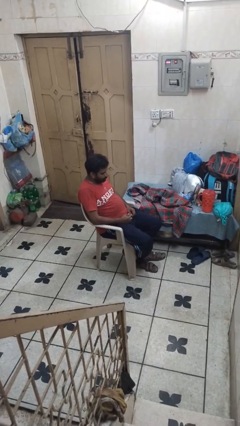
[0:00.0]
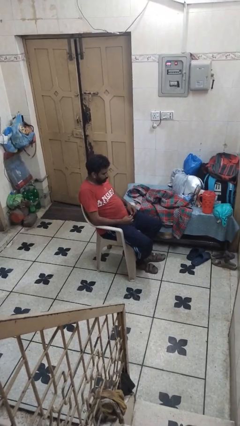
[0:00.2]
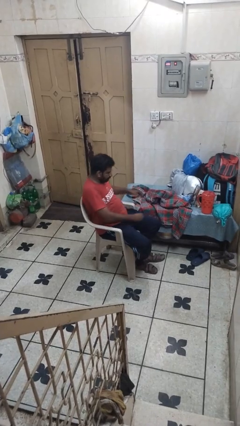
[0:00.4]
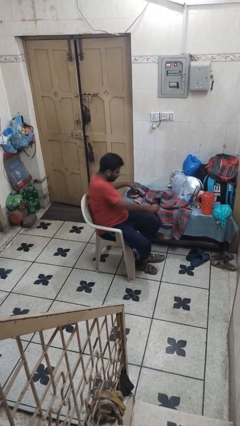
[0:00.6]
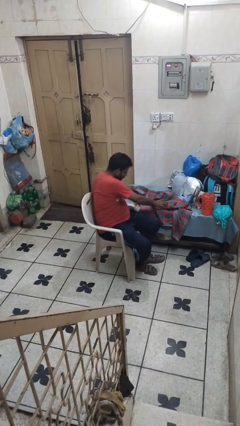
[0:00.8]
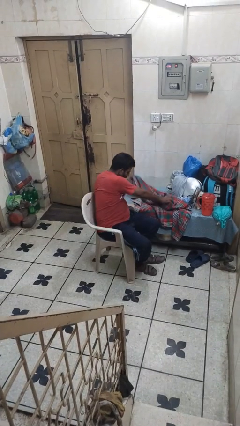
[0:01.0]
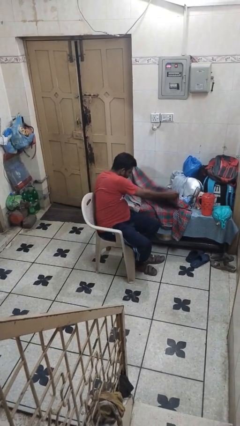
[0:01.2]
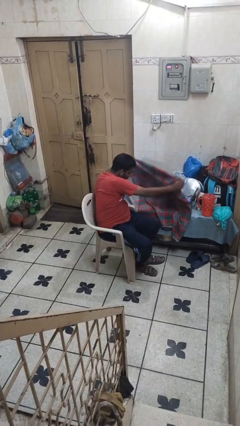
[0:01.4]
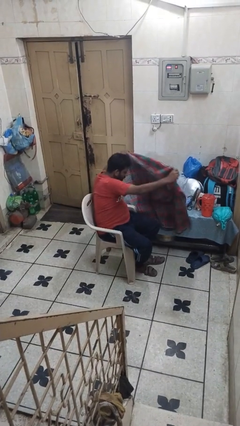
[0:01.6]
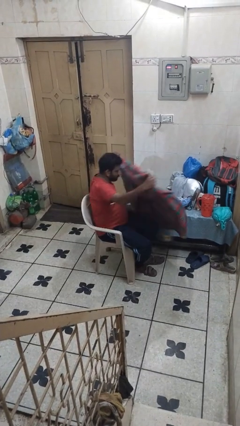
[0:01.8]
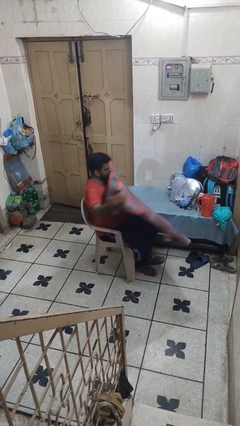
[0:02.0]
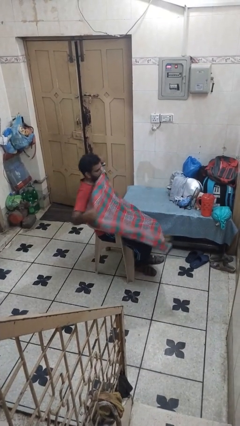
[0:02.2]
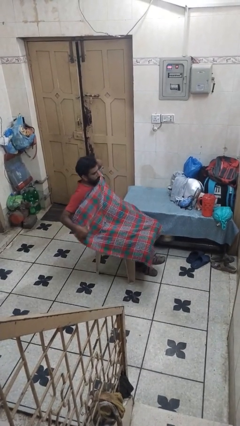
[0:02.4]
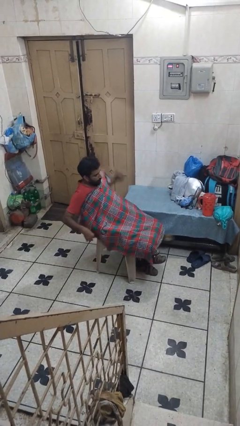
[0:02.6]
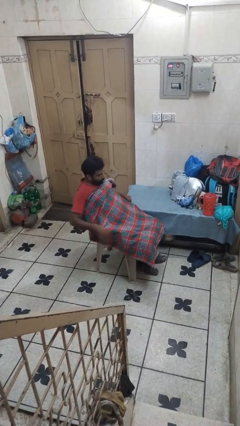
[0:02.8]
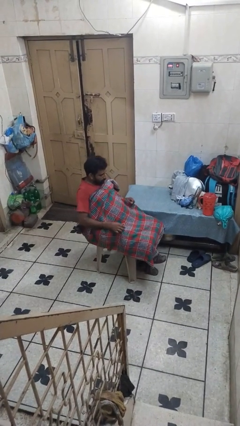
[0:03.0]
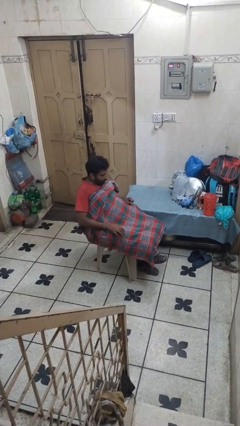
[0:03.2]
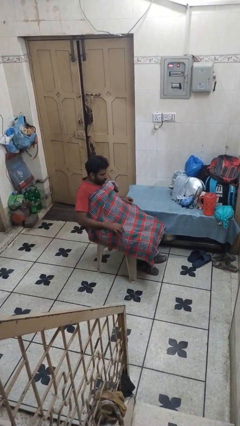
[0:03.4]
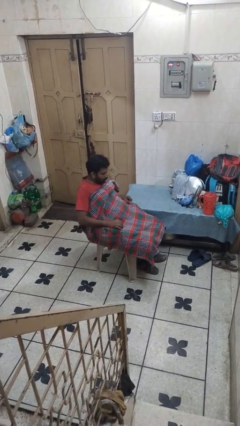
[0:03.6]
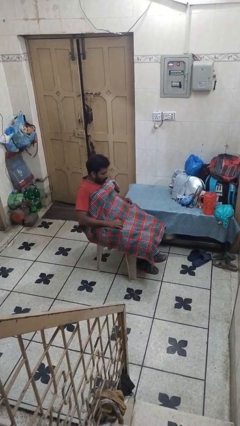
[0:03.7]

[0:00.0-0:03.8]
person covers with blanket

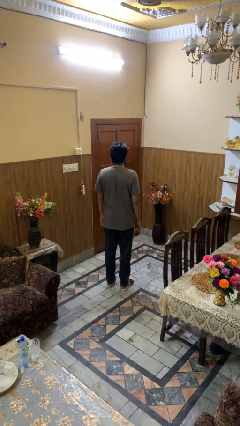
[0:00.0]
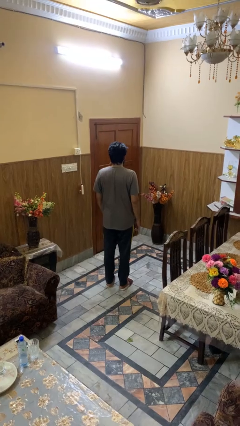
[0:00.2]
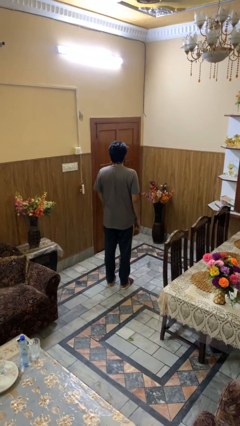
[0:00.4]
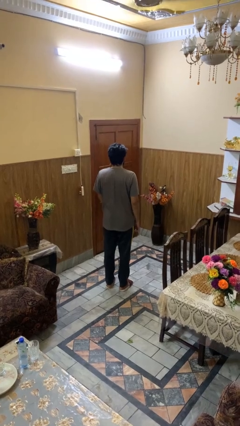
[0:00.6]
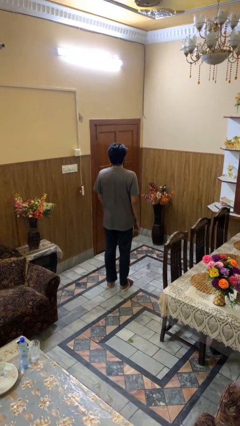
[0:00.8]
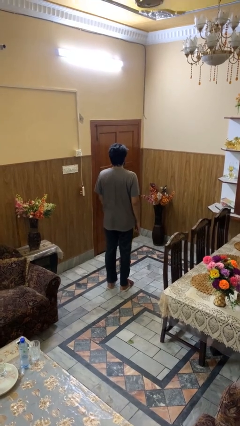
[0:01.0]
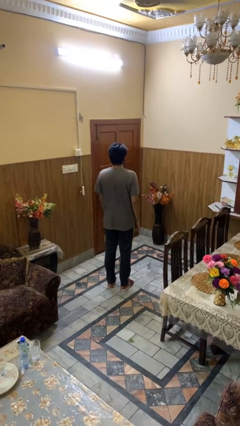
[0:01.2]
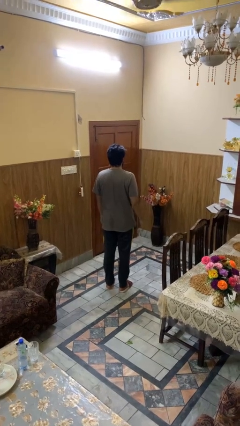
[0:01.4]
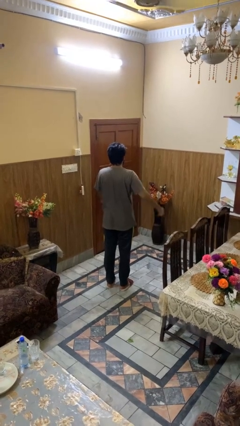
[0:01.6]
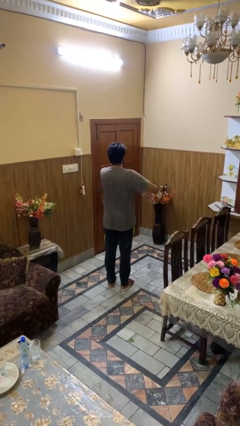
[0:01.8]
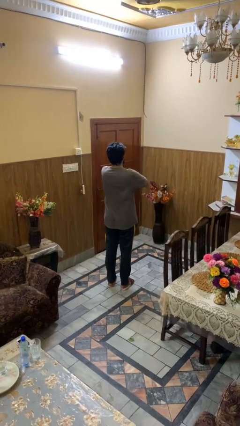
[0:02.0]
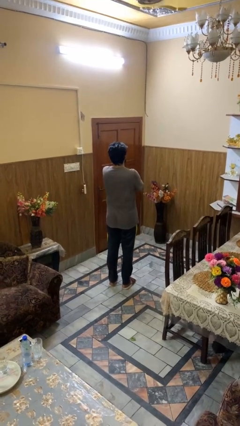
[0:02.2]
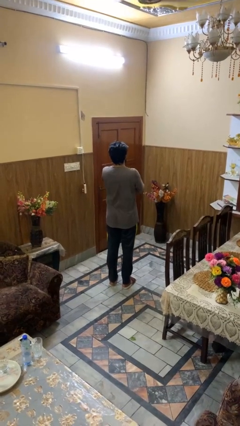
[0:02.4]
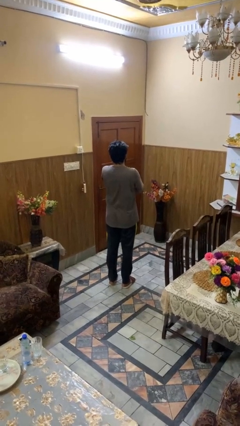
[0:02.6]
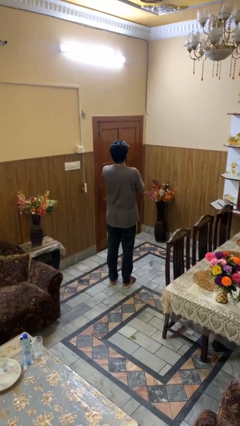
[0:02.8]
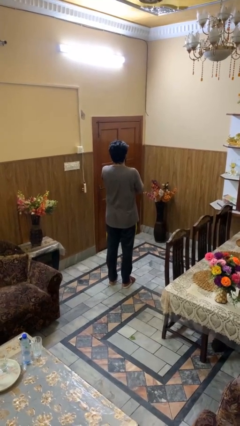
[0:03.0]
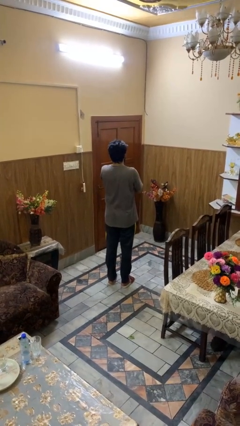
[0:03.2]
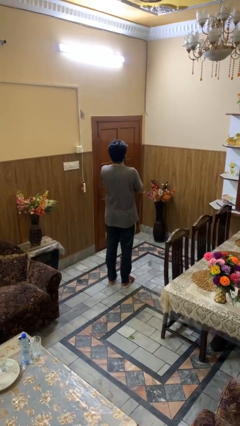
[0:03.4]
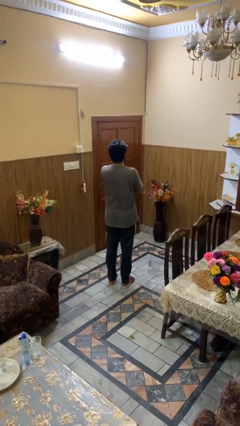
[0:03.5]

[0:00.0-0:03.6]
person crosses arms

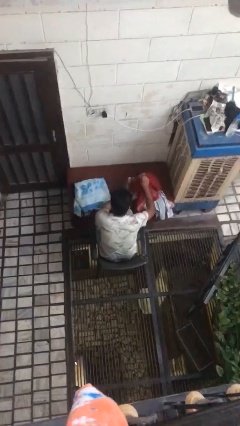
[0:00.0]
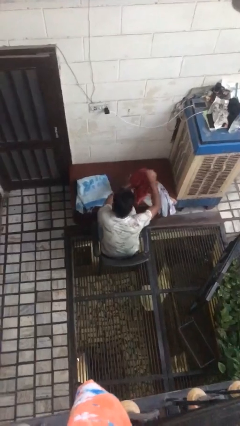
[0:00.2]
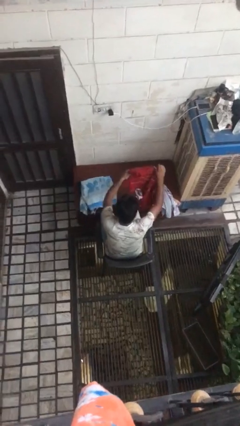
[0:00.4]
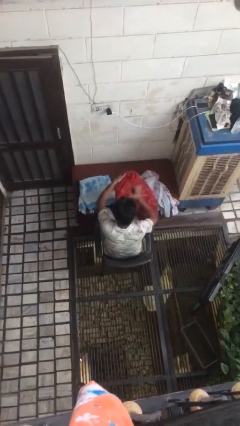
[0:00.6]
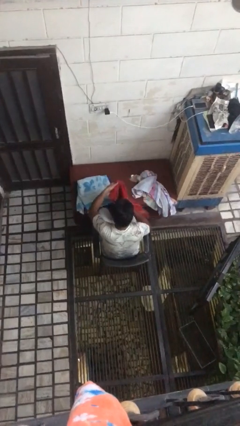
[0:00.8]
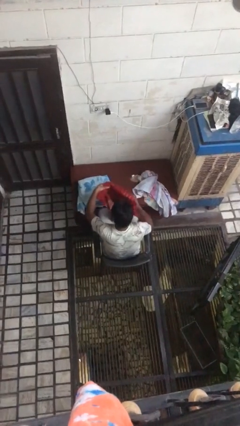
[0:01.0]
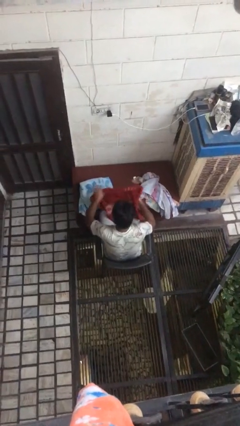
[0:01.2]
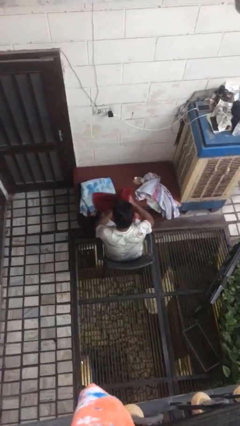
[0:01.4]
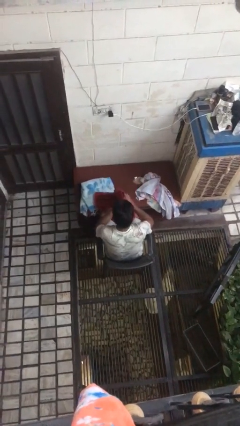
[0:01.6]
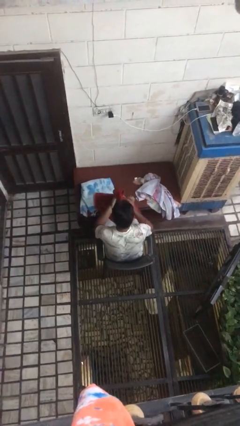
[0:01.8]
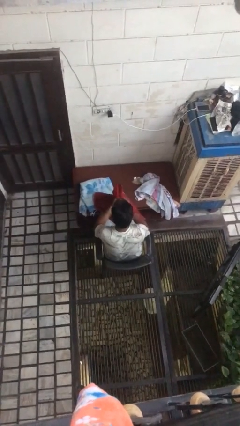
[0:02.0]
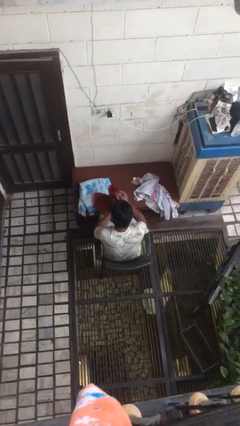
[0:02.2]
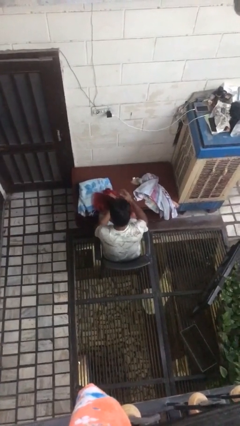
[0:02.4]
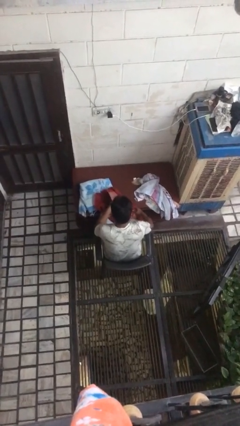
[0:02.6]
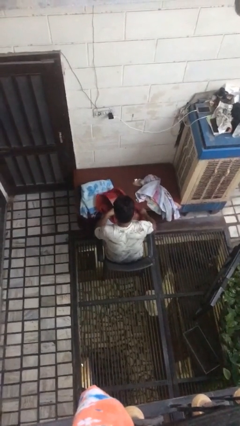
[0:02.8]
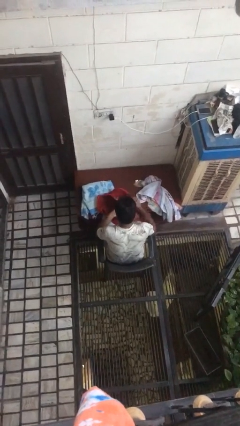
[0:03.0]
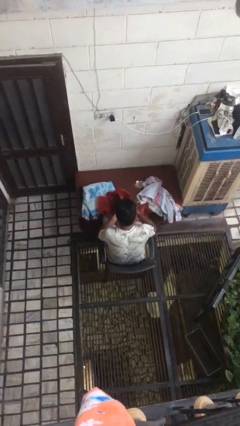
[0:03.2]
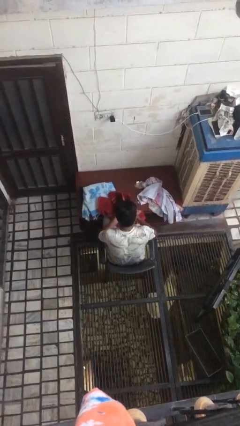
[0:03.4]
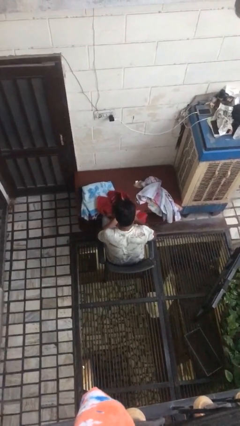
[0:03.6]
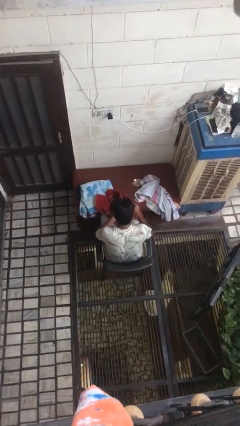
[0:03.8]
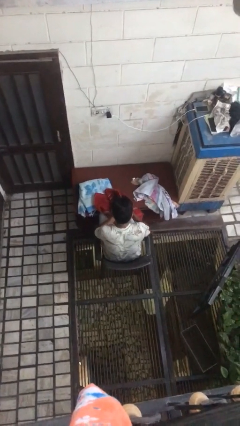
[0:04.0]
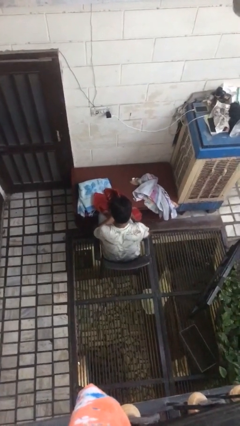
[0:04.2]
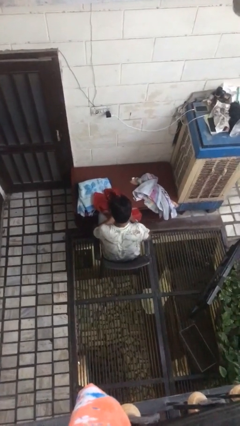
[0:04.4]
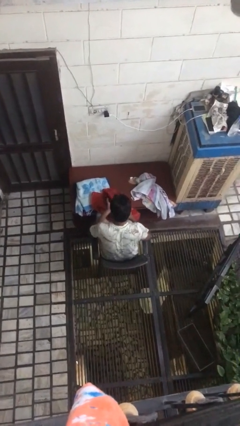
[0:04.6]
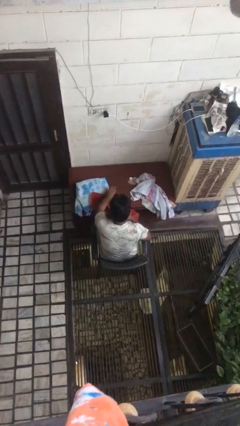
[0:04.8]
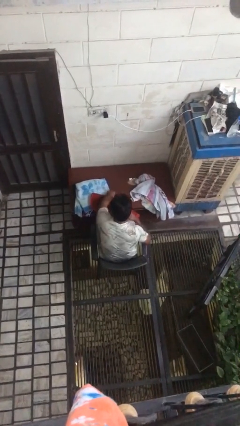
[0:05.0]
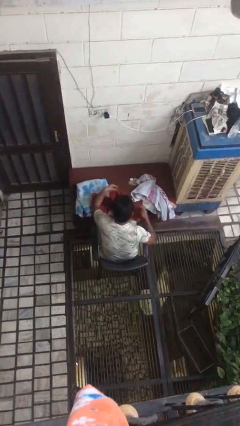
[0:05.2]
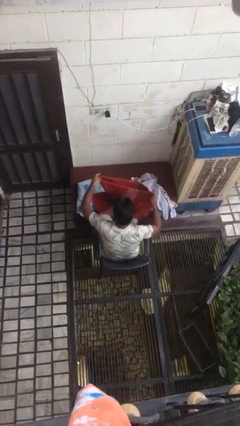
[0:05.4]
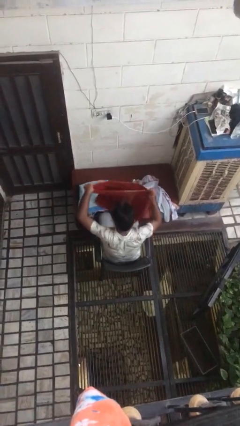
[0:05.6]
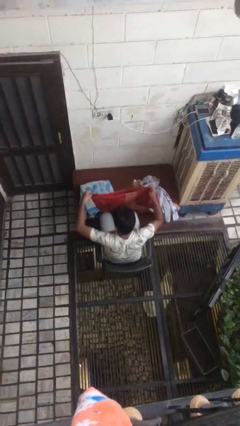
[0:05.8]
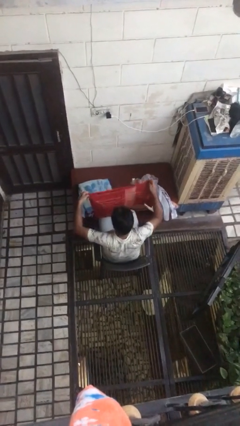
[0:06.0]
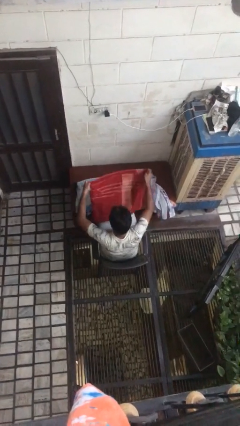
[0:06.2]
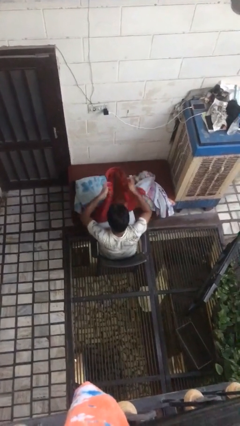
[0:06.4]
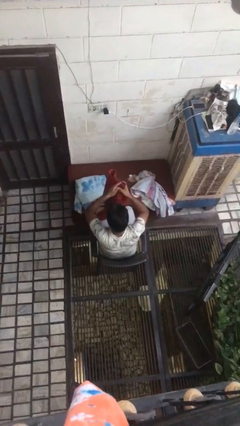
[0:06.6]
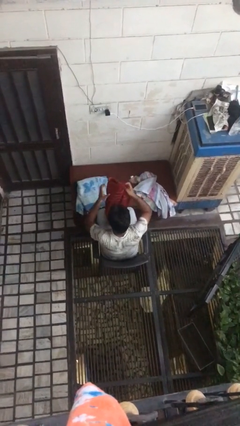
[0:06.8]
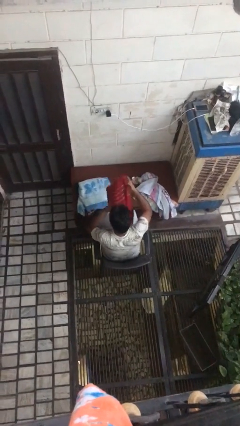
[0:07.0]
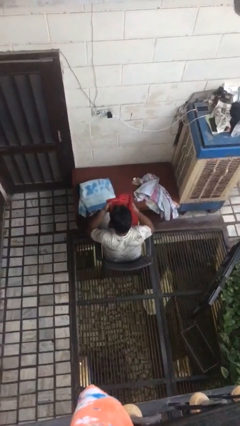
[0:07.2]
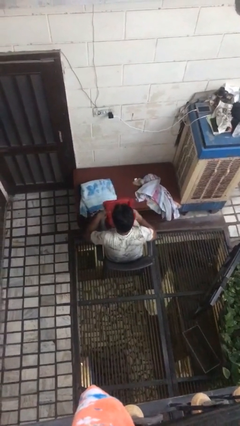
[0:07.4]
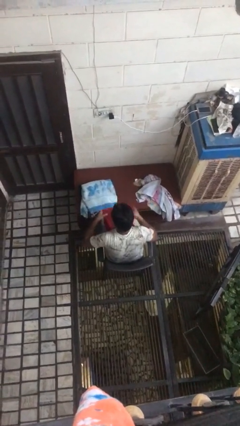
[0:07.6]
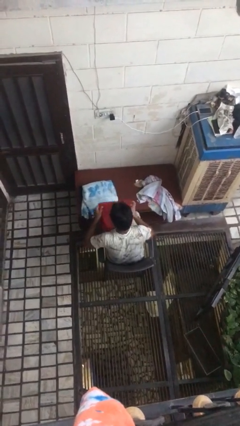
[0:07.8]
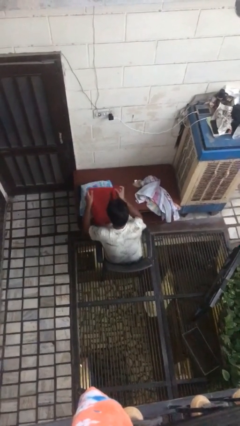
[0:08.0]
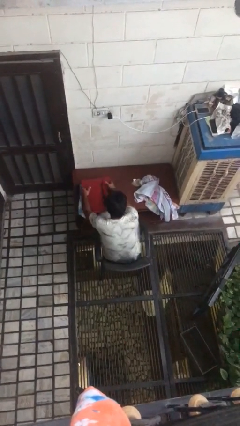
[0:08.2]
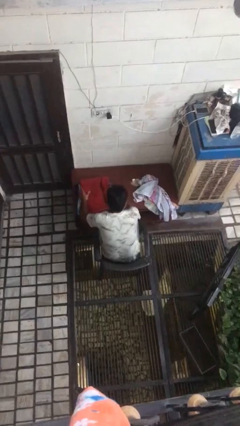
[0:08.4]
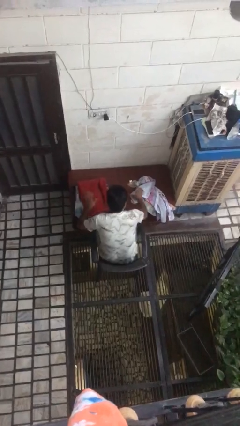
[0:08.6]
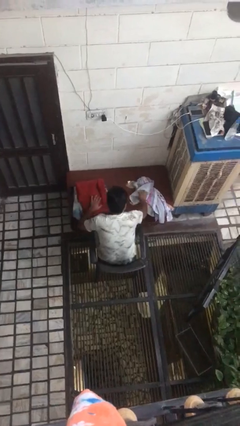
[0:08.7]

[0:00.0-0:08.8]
person folds towel

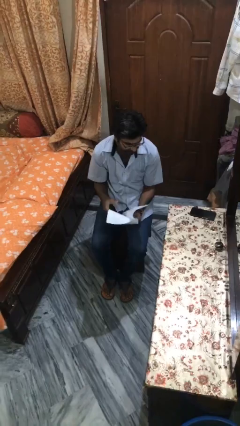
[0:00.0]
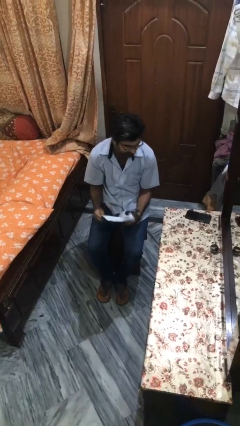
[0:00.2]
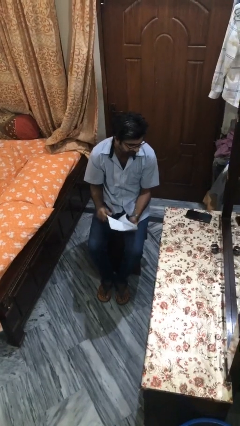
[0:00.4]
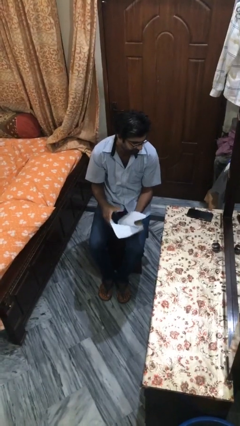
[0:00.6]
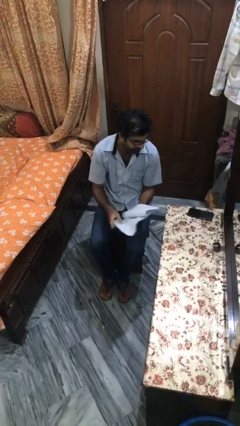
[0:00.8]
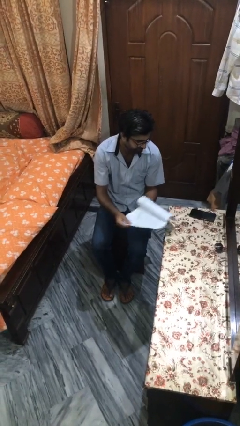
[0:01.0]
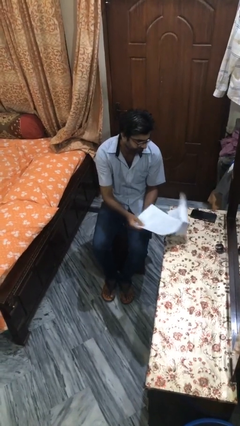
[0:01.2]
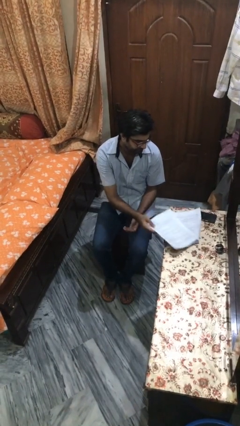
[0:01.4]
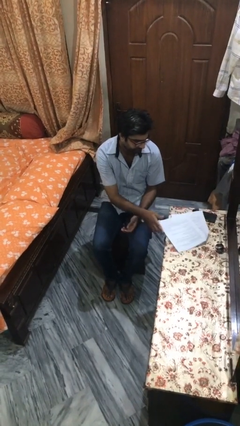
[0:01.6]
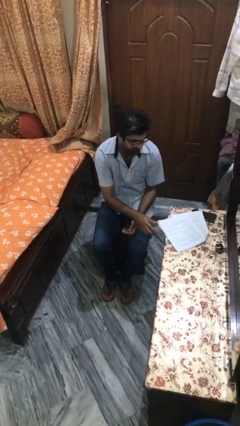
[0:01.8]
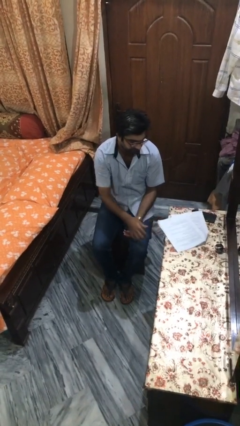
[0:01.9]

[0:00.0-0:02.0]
person puts down object on table

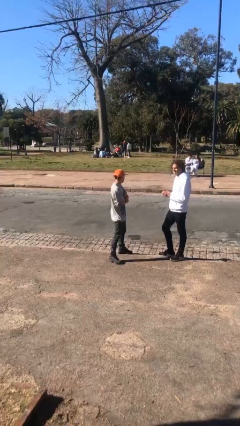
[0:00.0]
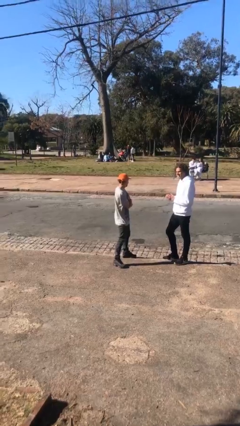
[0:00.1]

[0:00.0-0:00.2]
person talks to person
